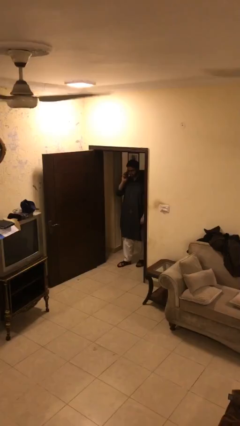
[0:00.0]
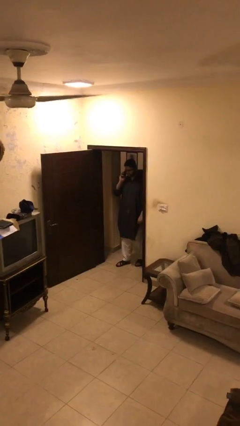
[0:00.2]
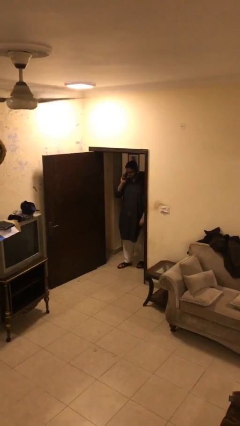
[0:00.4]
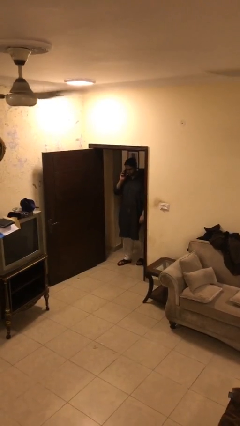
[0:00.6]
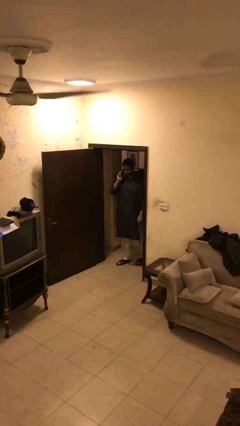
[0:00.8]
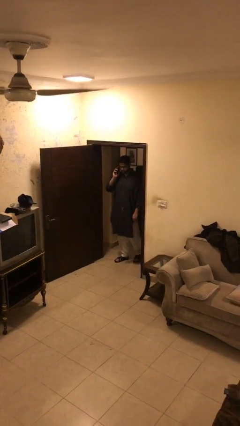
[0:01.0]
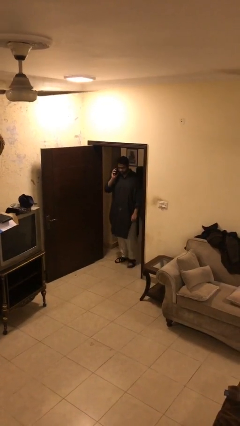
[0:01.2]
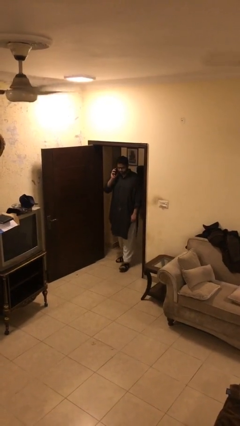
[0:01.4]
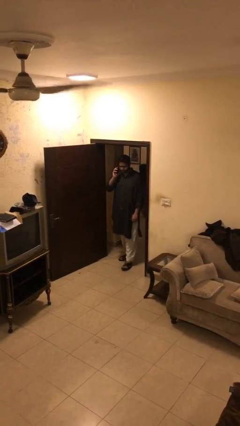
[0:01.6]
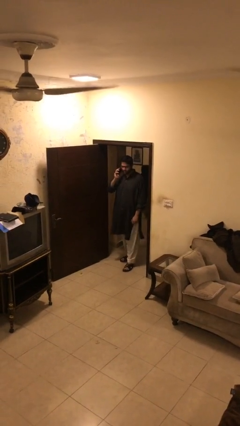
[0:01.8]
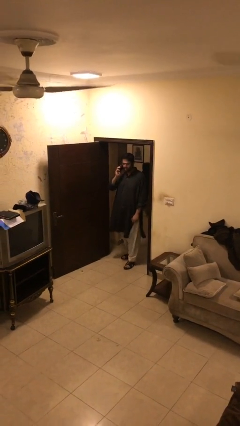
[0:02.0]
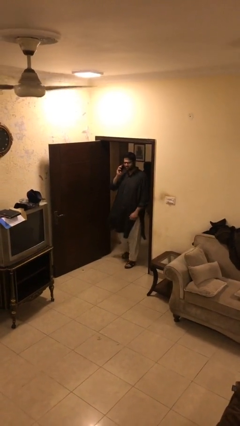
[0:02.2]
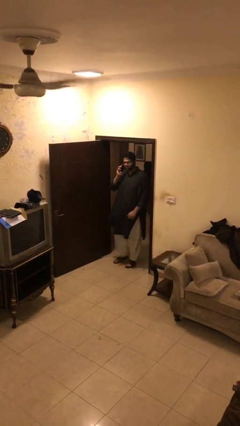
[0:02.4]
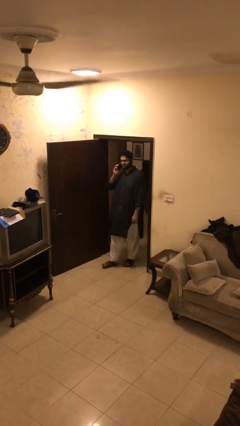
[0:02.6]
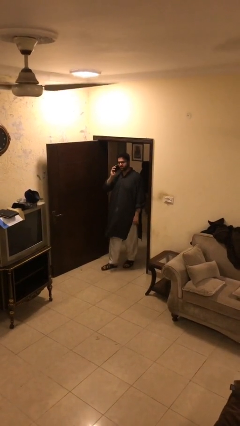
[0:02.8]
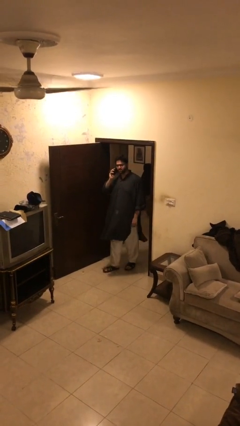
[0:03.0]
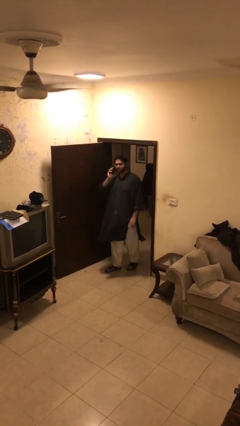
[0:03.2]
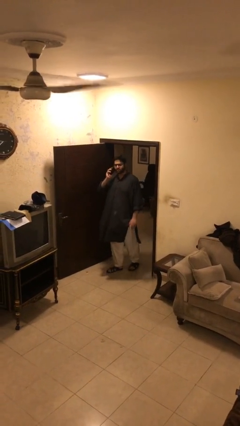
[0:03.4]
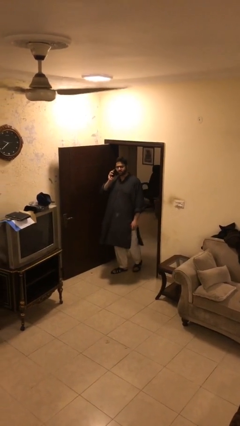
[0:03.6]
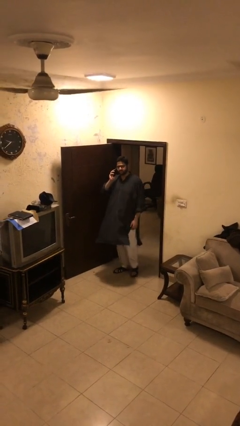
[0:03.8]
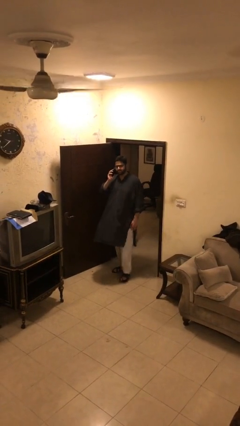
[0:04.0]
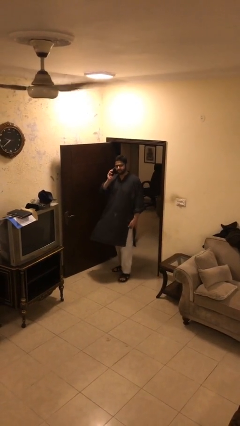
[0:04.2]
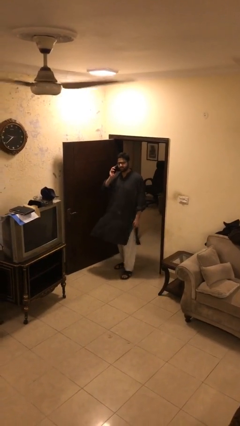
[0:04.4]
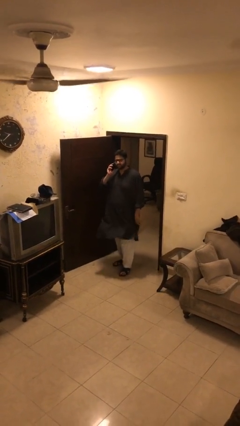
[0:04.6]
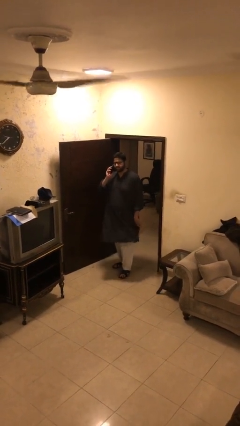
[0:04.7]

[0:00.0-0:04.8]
person enters scene through structure

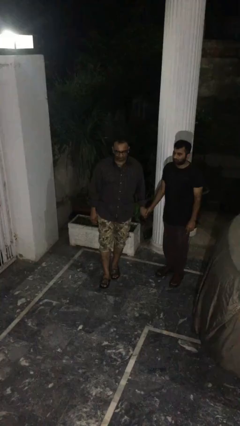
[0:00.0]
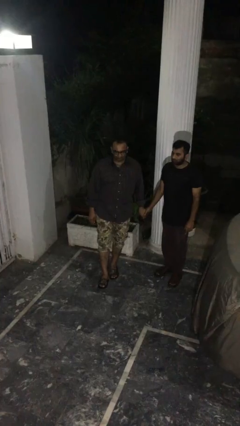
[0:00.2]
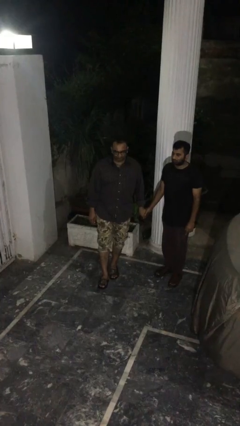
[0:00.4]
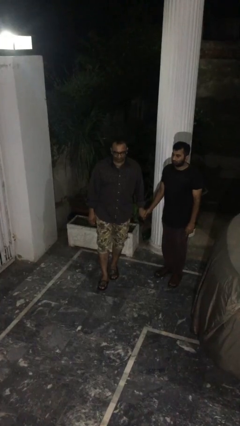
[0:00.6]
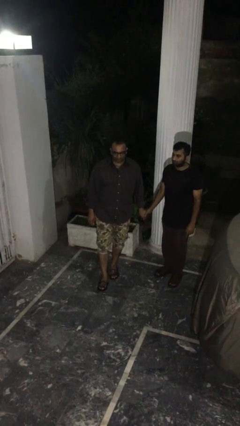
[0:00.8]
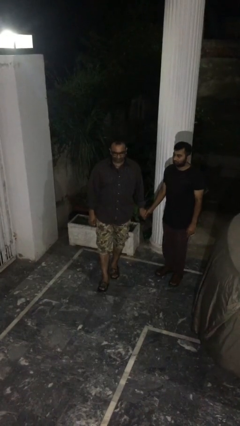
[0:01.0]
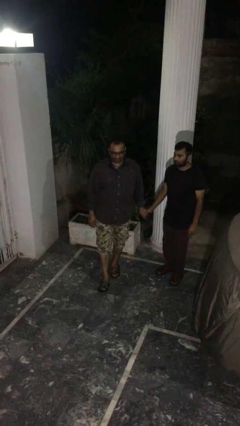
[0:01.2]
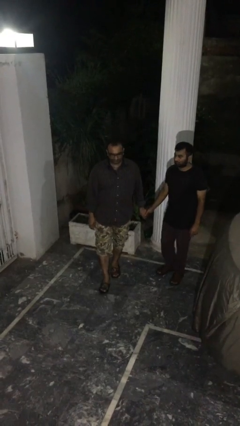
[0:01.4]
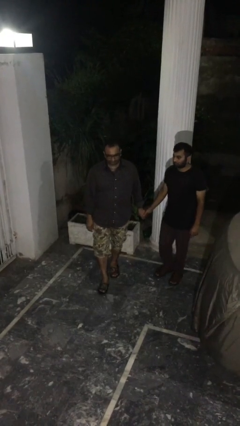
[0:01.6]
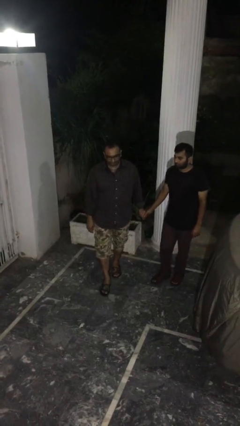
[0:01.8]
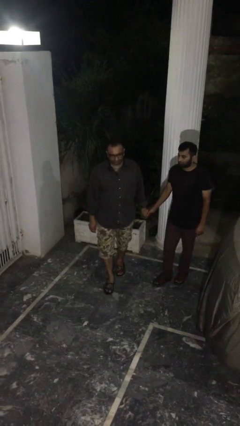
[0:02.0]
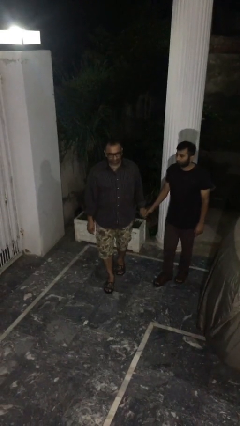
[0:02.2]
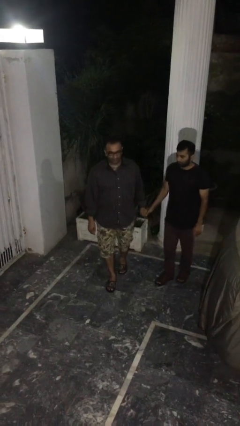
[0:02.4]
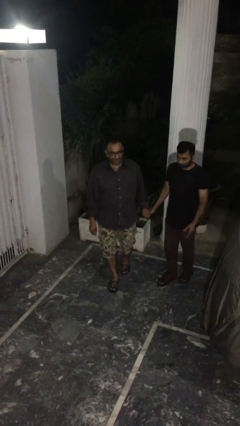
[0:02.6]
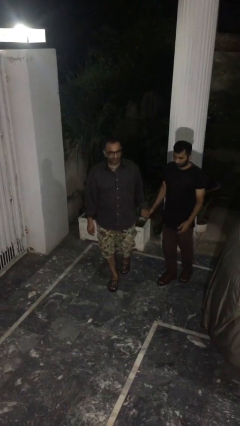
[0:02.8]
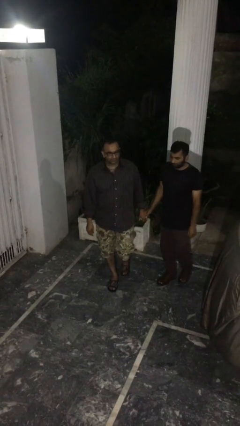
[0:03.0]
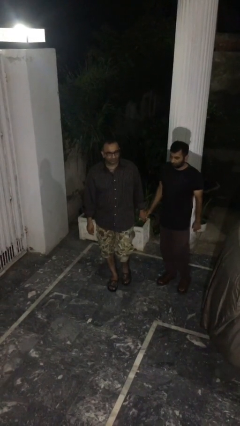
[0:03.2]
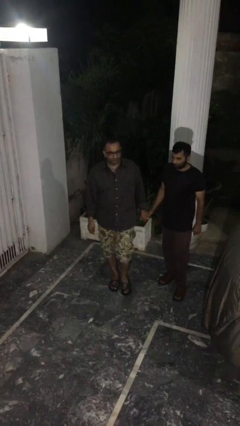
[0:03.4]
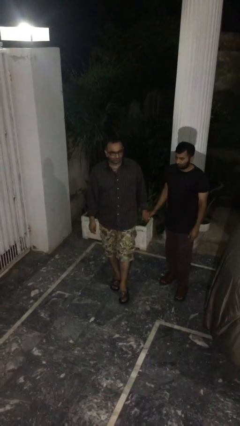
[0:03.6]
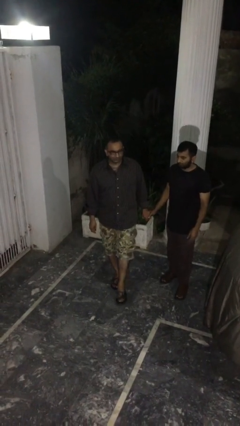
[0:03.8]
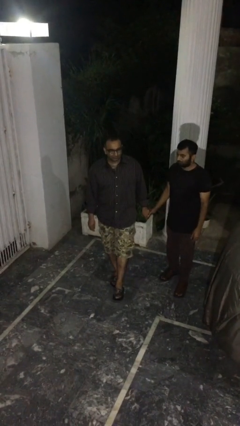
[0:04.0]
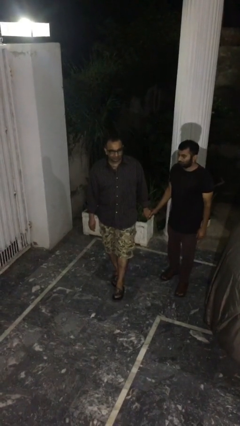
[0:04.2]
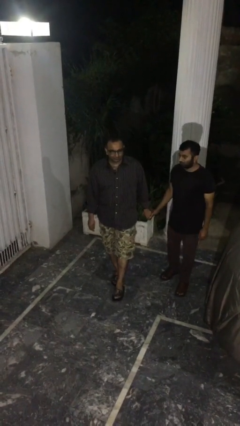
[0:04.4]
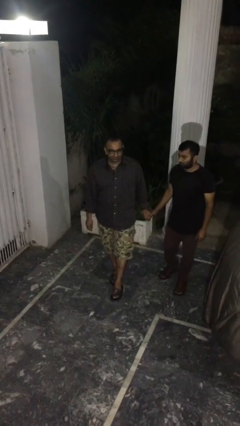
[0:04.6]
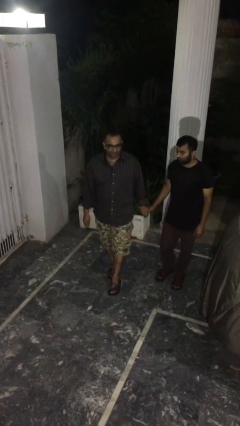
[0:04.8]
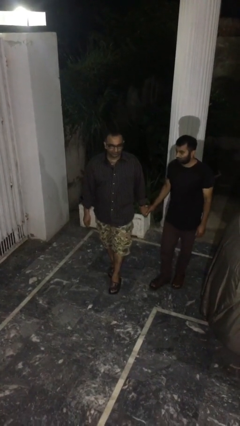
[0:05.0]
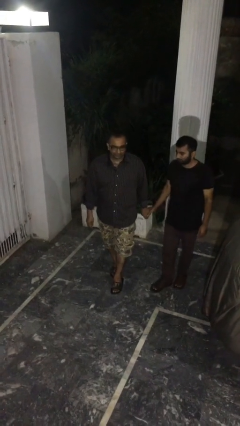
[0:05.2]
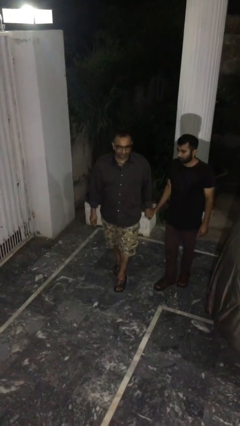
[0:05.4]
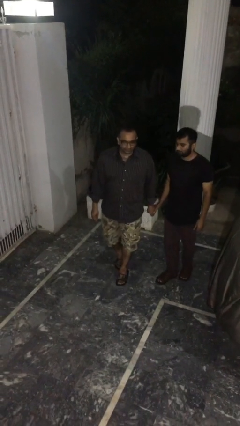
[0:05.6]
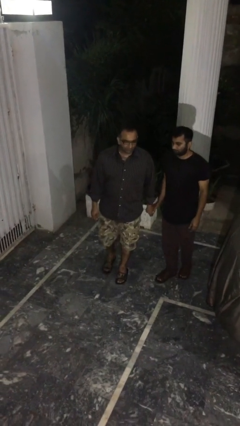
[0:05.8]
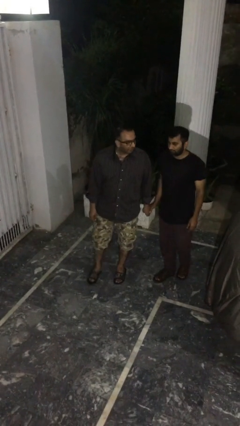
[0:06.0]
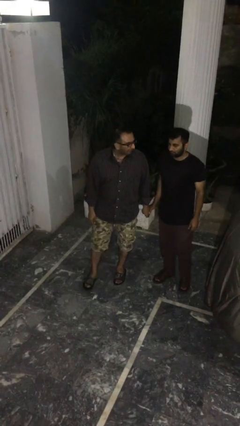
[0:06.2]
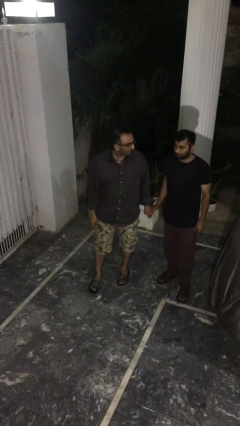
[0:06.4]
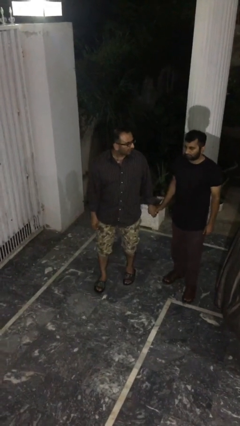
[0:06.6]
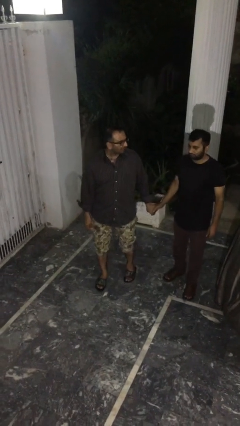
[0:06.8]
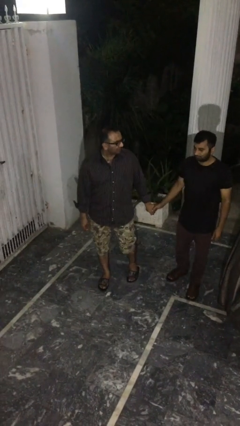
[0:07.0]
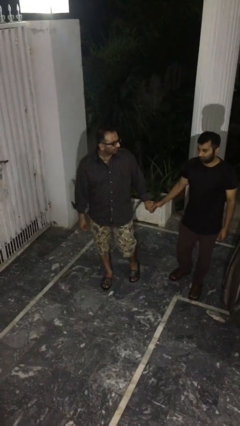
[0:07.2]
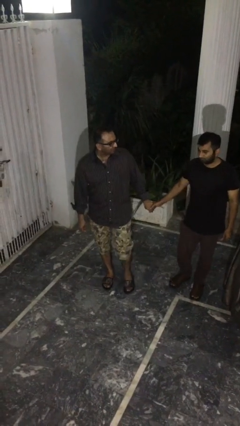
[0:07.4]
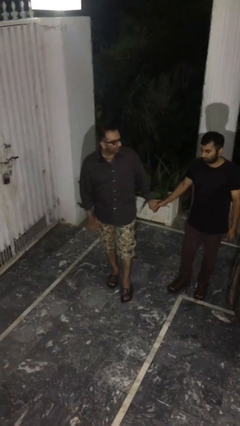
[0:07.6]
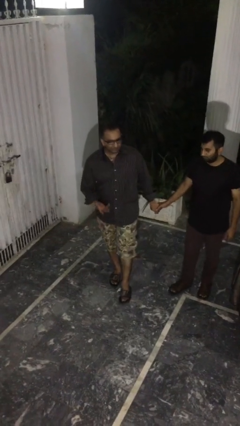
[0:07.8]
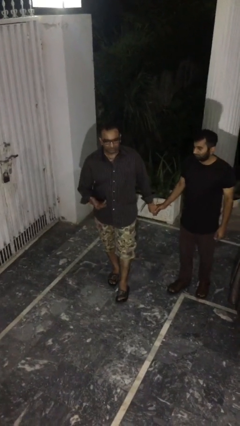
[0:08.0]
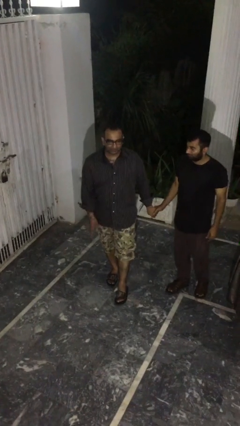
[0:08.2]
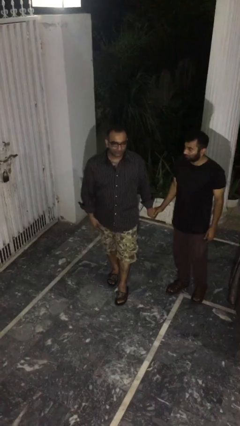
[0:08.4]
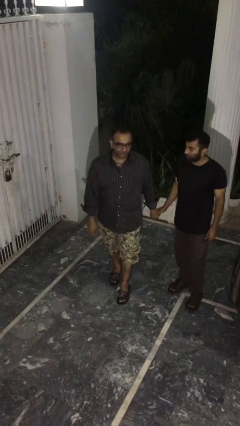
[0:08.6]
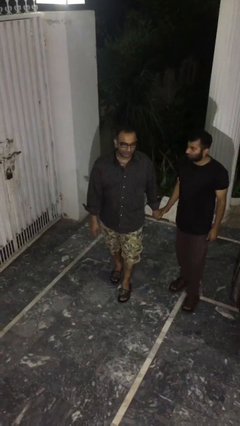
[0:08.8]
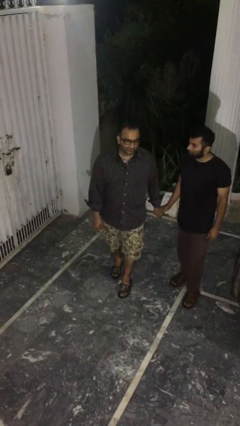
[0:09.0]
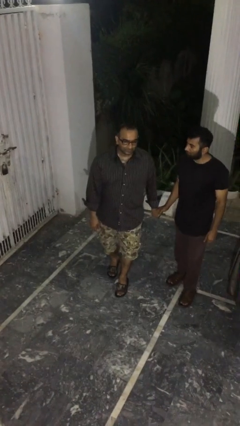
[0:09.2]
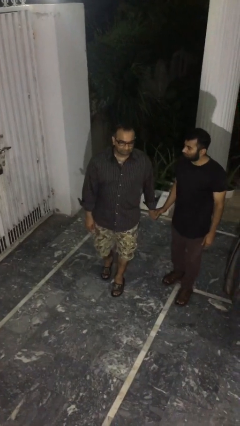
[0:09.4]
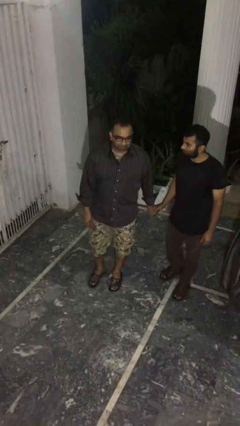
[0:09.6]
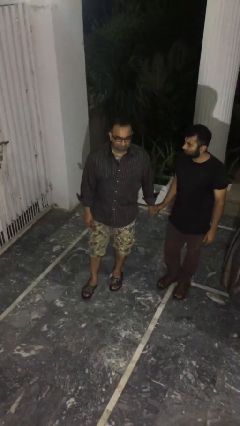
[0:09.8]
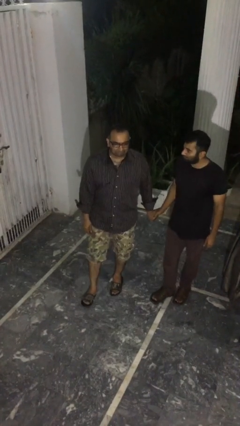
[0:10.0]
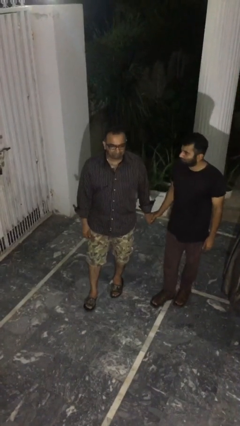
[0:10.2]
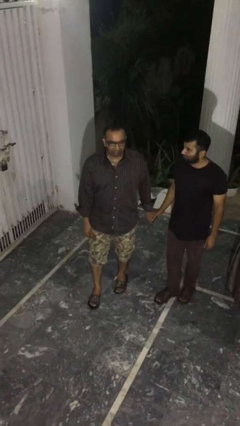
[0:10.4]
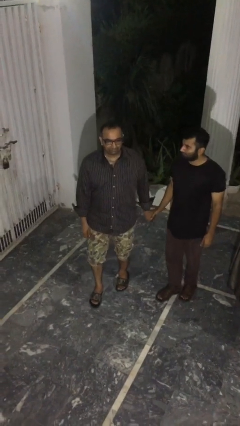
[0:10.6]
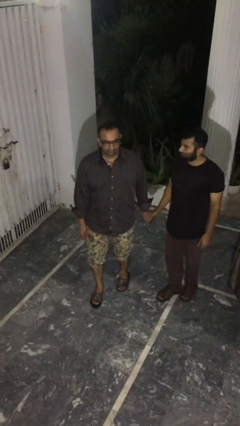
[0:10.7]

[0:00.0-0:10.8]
person holds hand

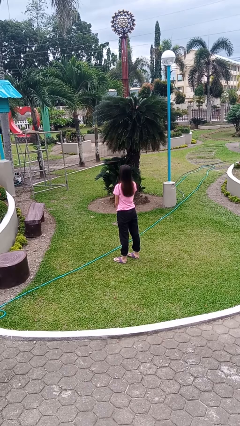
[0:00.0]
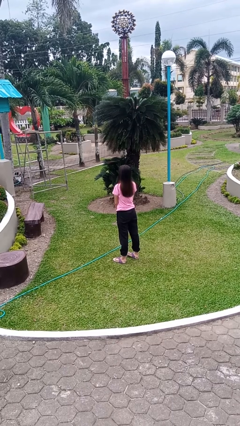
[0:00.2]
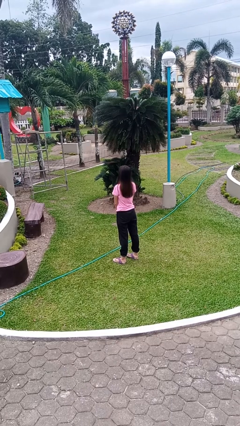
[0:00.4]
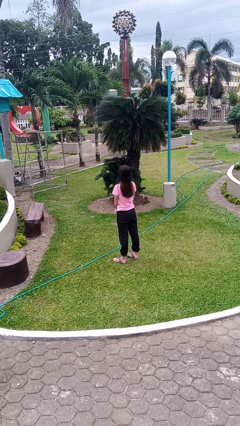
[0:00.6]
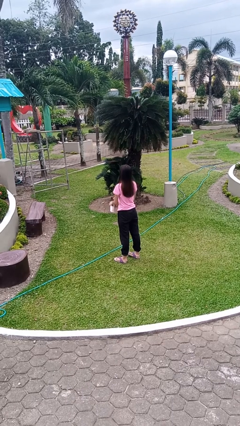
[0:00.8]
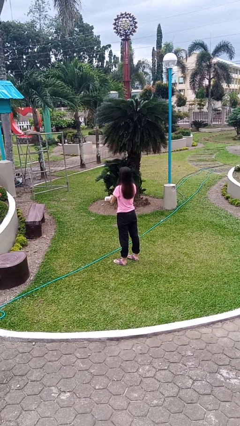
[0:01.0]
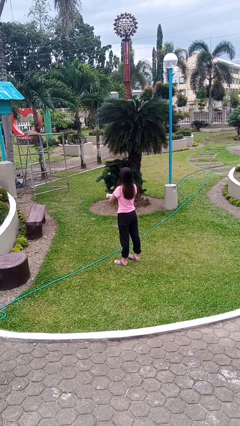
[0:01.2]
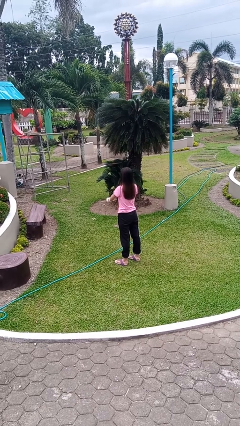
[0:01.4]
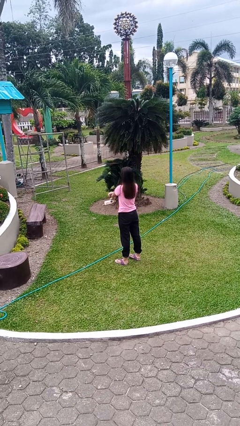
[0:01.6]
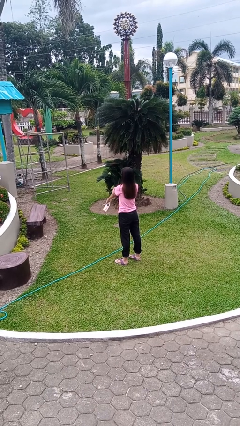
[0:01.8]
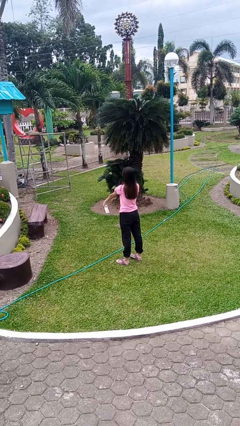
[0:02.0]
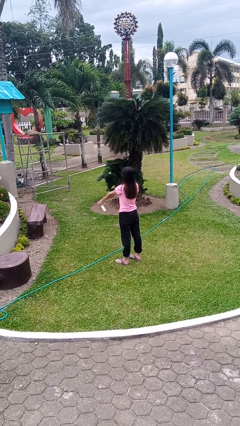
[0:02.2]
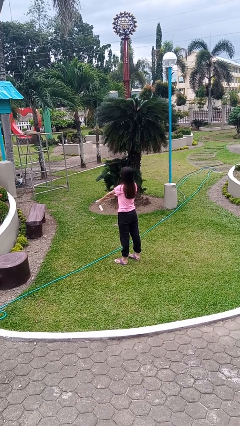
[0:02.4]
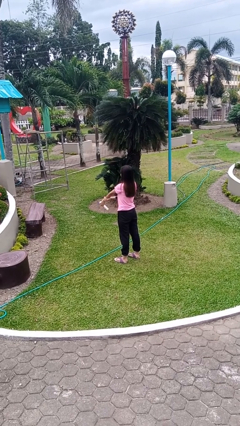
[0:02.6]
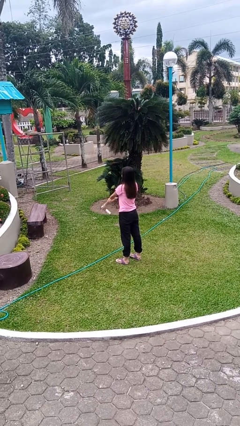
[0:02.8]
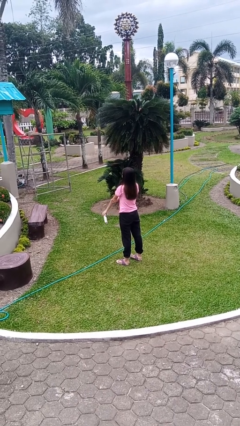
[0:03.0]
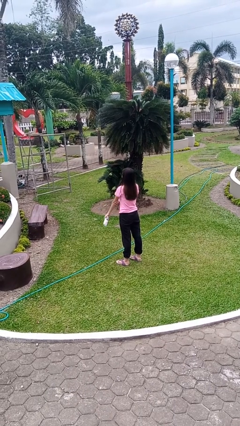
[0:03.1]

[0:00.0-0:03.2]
person applies sunscreen
